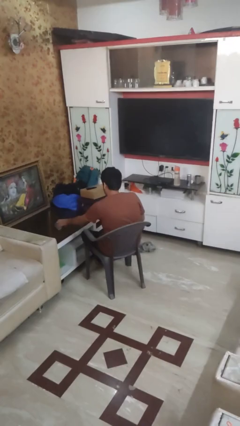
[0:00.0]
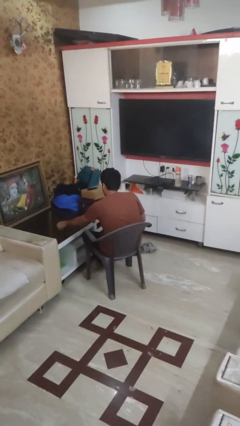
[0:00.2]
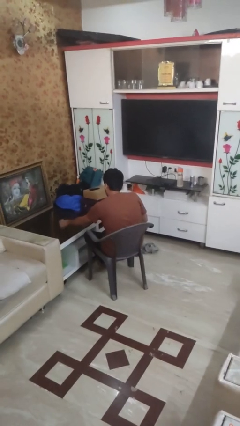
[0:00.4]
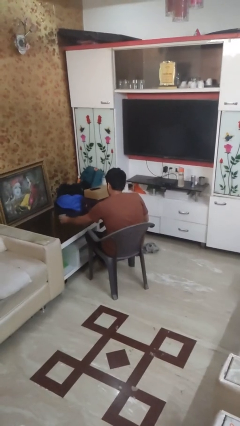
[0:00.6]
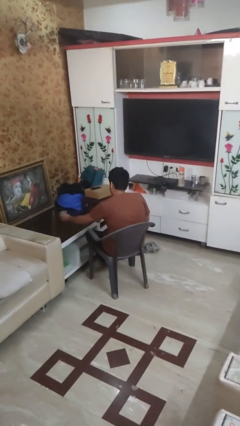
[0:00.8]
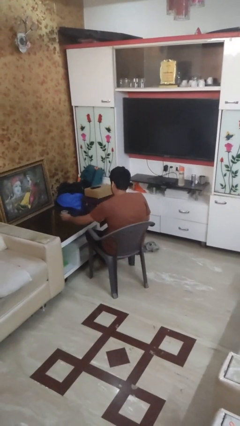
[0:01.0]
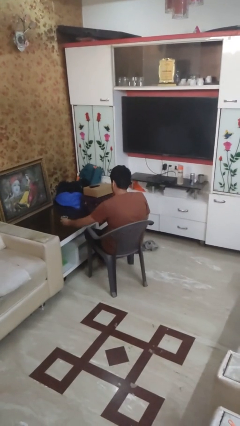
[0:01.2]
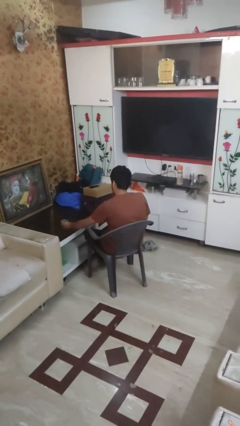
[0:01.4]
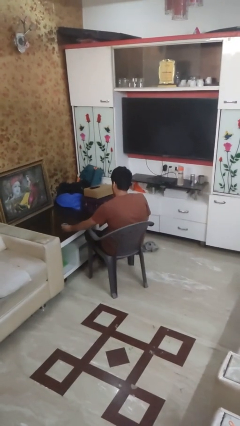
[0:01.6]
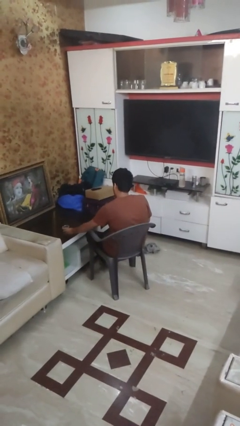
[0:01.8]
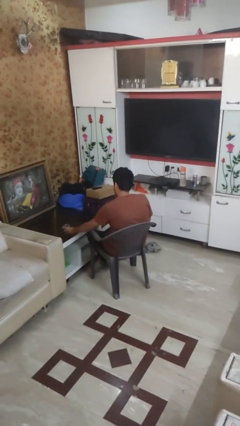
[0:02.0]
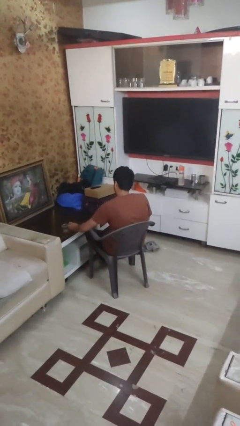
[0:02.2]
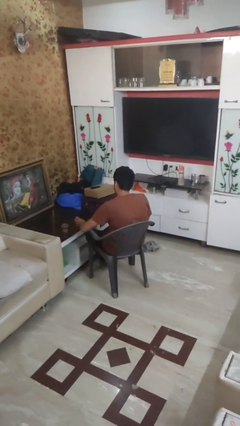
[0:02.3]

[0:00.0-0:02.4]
person sets upright glass

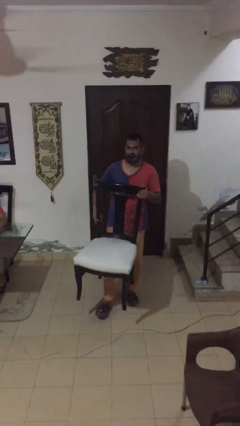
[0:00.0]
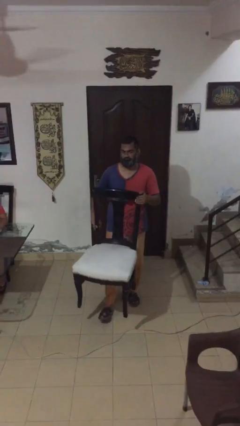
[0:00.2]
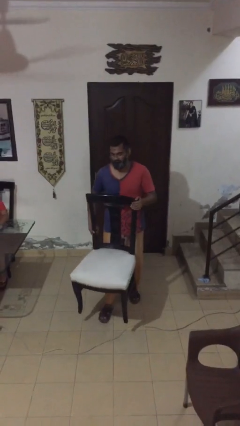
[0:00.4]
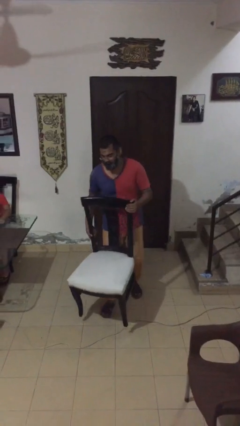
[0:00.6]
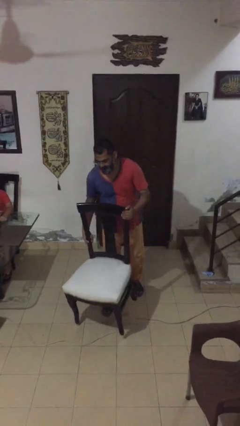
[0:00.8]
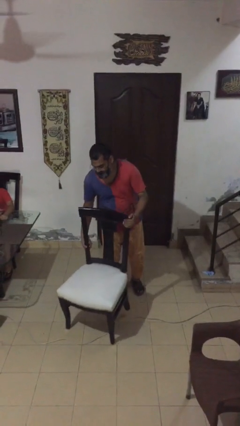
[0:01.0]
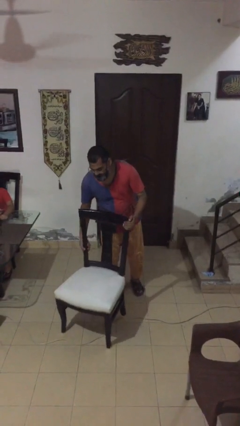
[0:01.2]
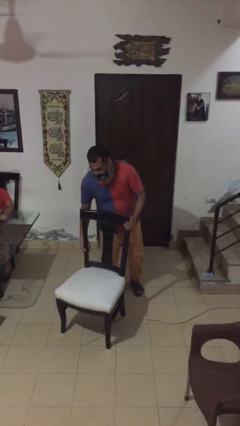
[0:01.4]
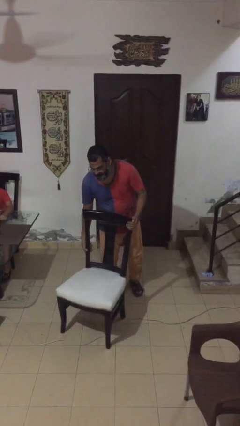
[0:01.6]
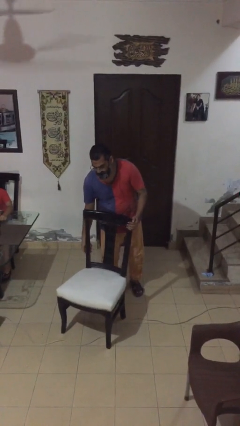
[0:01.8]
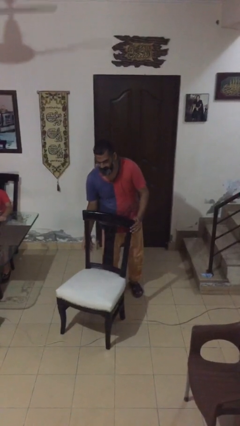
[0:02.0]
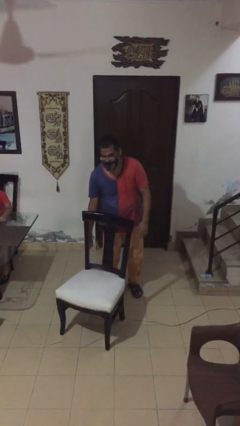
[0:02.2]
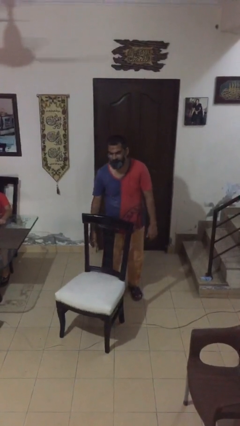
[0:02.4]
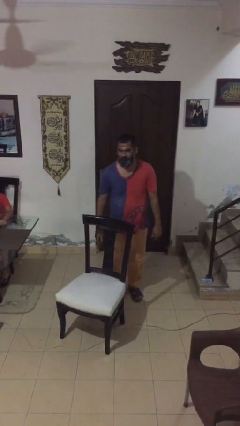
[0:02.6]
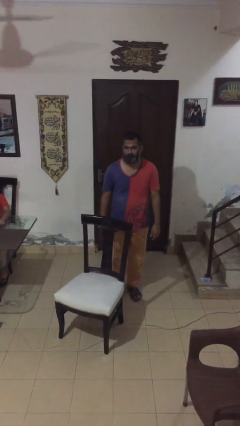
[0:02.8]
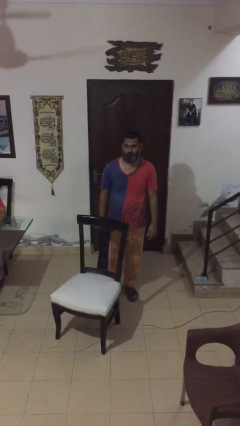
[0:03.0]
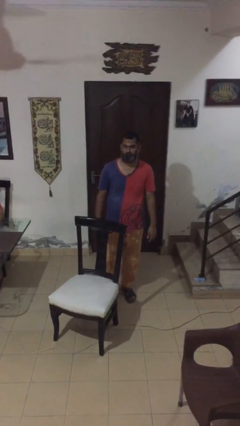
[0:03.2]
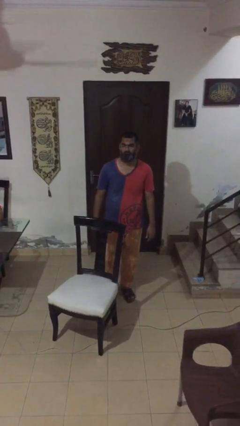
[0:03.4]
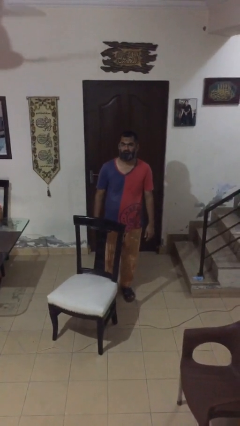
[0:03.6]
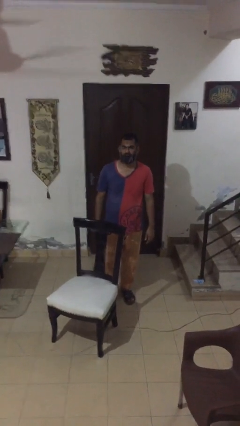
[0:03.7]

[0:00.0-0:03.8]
person puts down object on floor

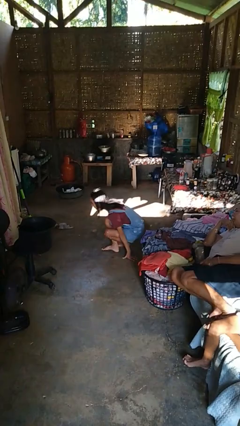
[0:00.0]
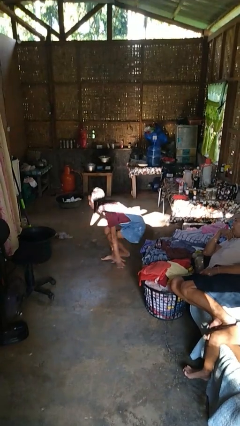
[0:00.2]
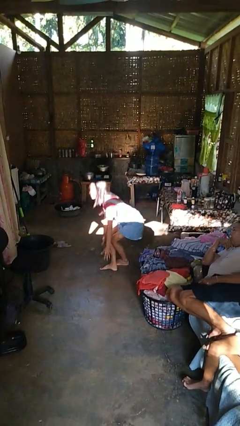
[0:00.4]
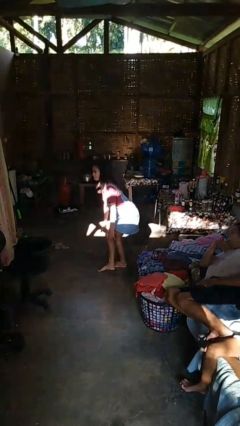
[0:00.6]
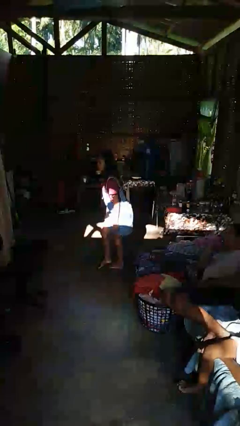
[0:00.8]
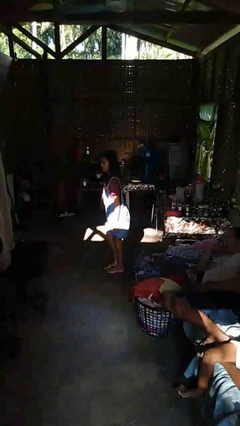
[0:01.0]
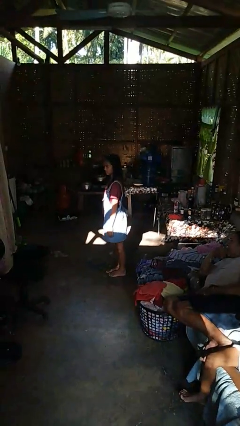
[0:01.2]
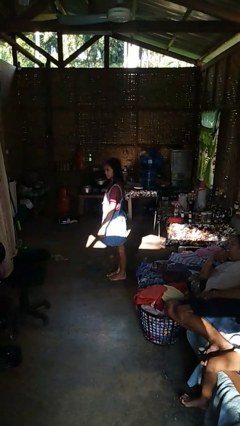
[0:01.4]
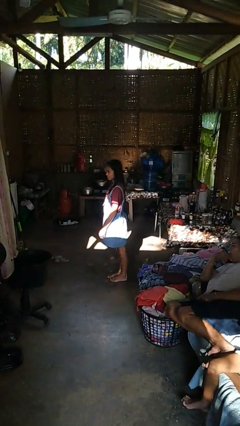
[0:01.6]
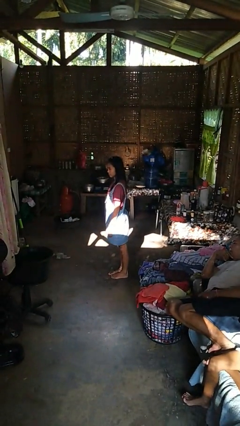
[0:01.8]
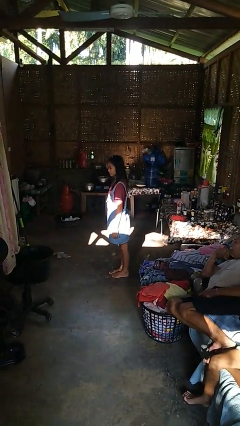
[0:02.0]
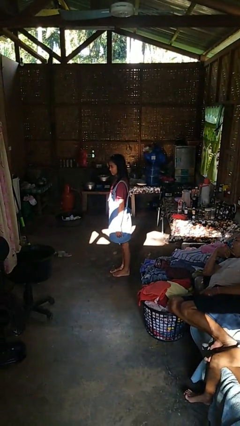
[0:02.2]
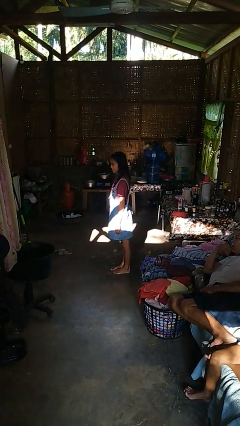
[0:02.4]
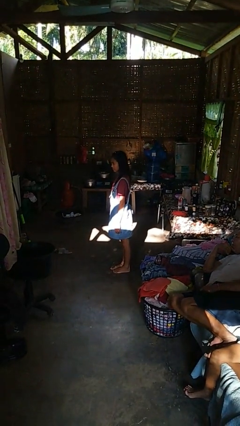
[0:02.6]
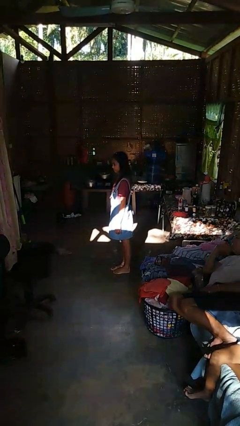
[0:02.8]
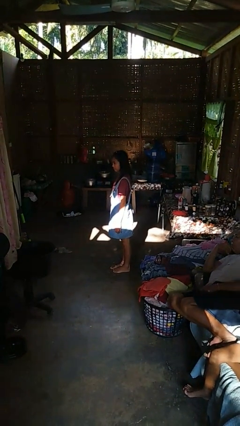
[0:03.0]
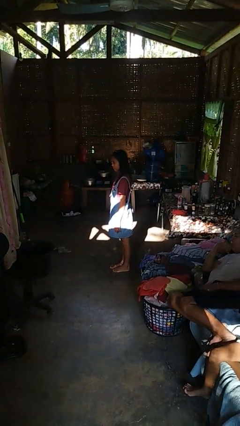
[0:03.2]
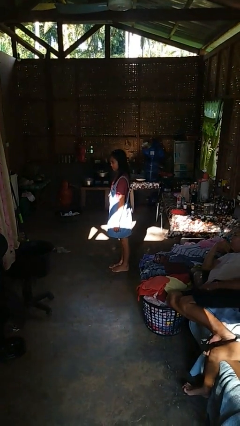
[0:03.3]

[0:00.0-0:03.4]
person stands up from floor

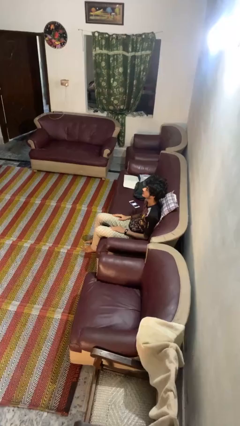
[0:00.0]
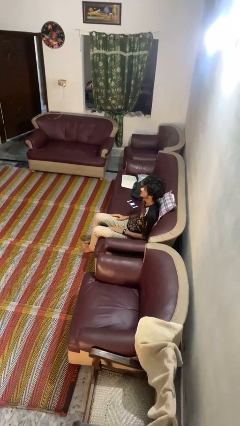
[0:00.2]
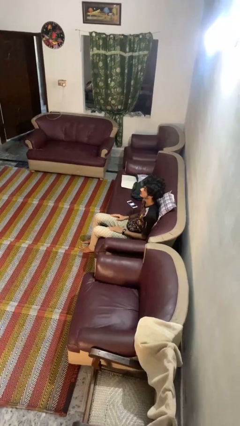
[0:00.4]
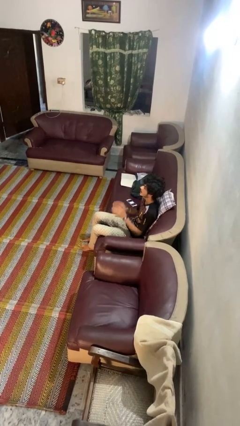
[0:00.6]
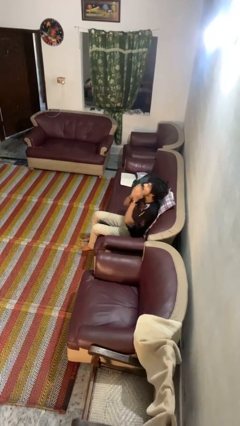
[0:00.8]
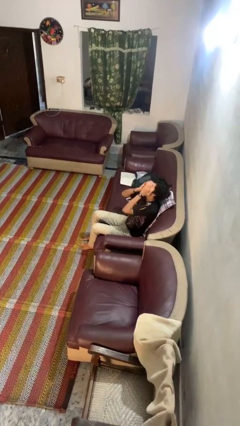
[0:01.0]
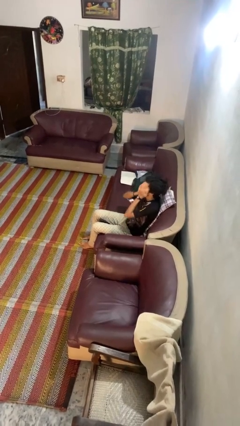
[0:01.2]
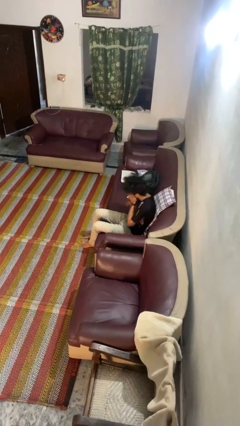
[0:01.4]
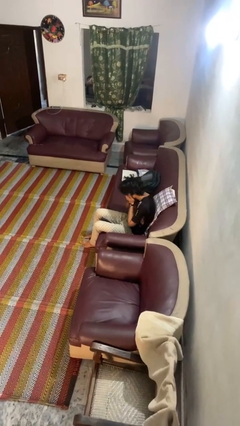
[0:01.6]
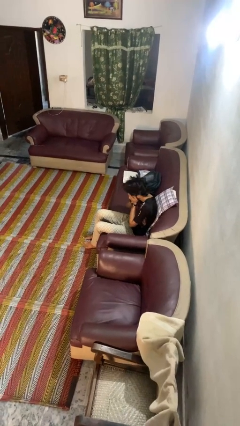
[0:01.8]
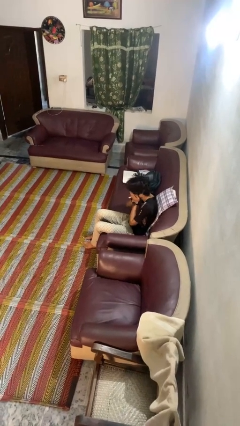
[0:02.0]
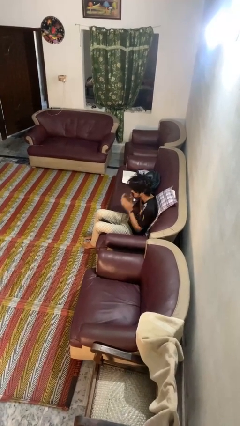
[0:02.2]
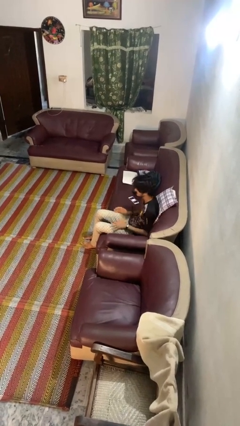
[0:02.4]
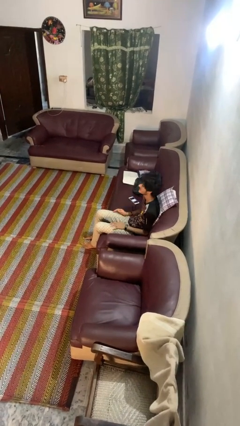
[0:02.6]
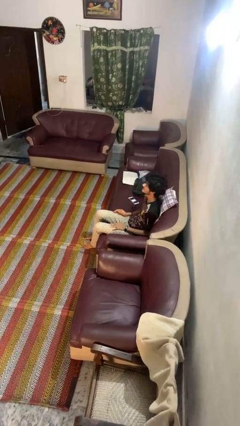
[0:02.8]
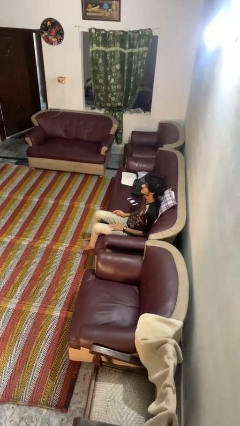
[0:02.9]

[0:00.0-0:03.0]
person sneezes into hand

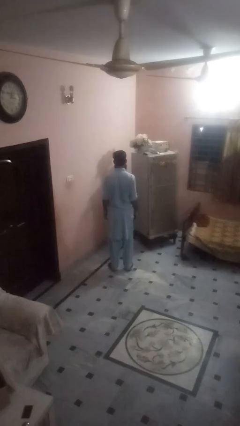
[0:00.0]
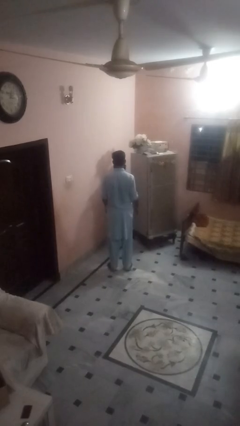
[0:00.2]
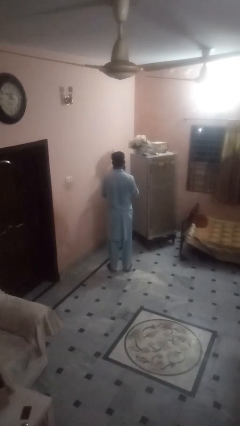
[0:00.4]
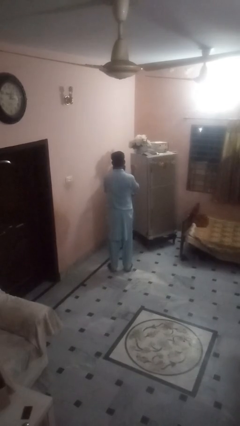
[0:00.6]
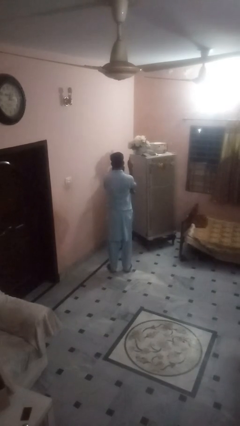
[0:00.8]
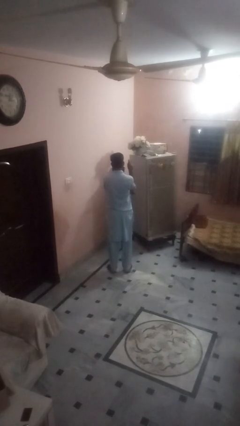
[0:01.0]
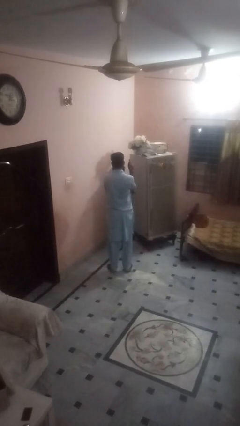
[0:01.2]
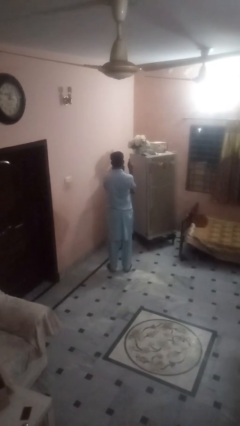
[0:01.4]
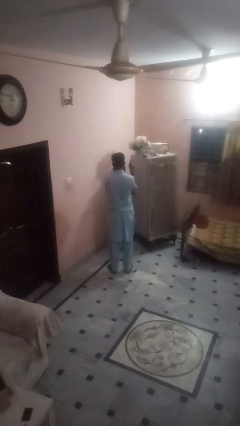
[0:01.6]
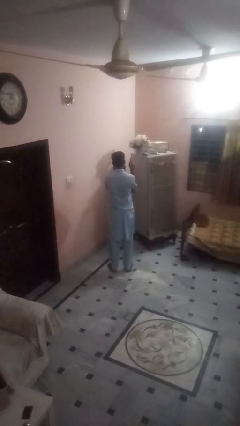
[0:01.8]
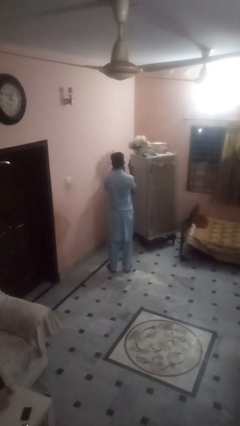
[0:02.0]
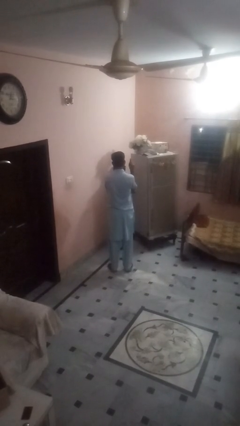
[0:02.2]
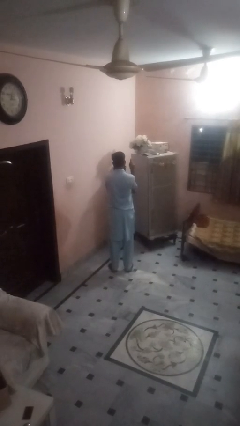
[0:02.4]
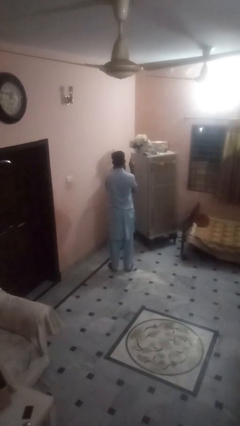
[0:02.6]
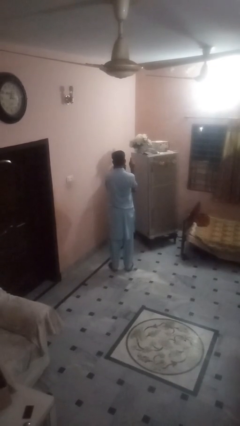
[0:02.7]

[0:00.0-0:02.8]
person gestures number one

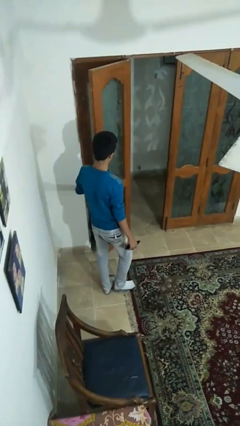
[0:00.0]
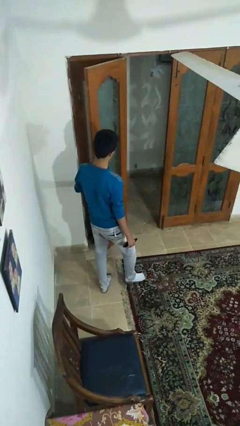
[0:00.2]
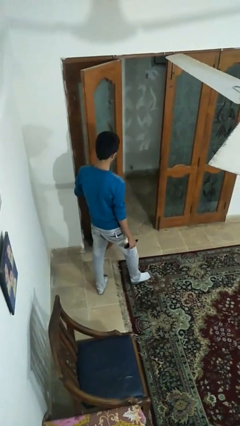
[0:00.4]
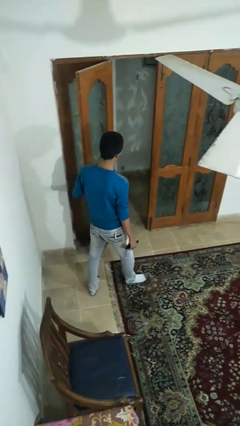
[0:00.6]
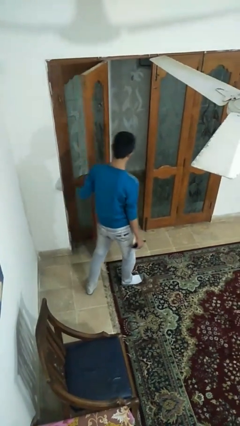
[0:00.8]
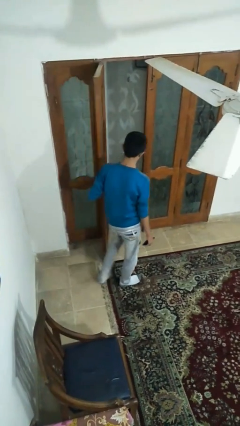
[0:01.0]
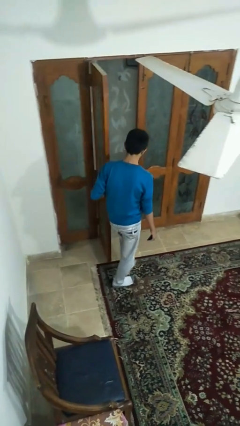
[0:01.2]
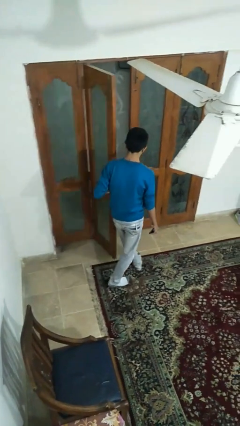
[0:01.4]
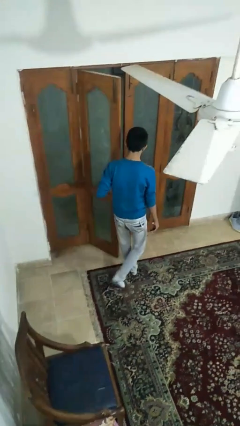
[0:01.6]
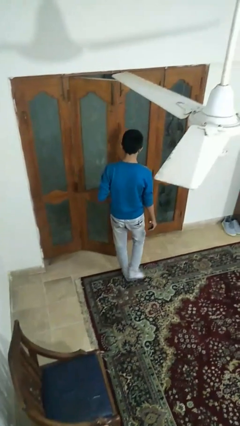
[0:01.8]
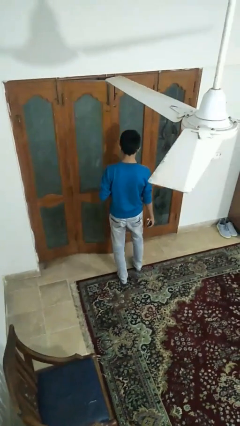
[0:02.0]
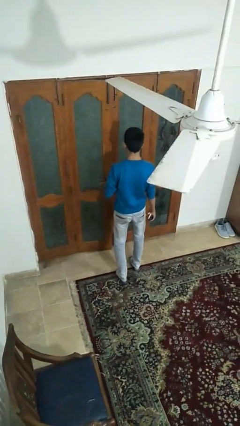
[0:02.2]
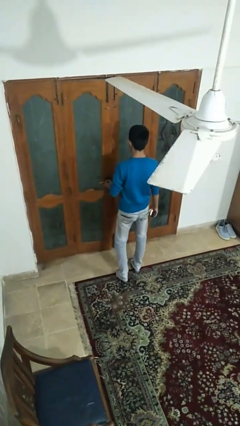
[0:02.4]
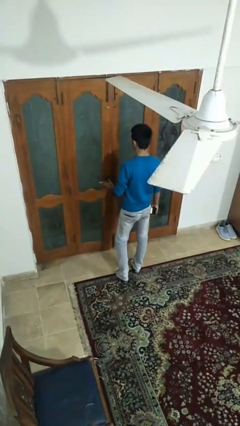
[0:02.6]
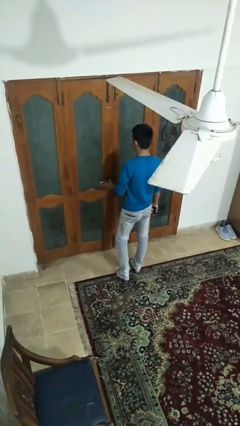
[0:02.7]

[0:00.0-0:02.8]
person closes facility door
